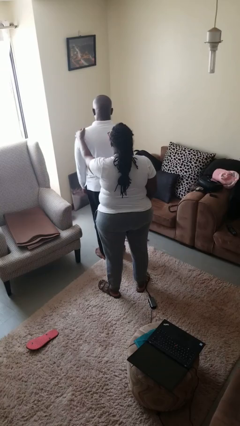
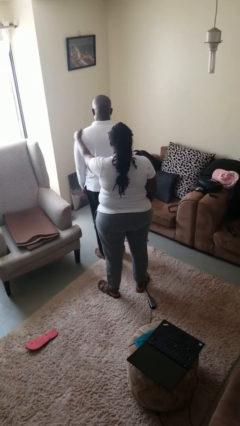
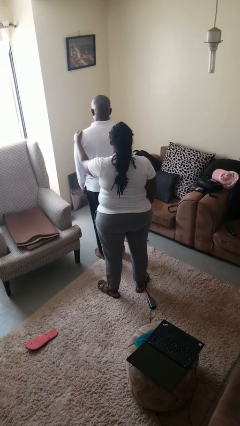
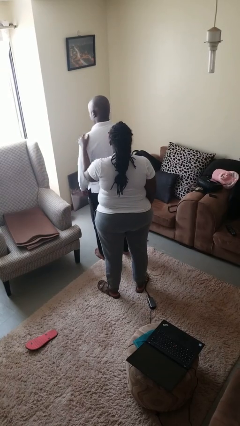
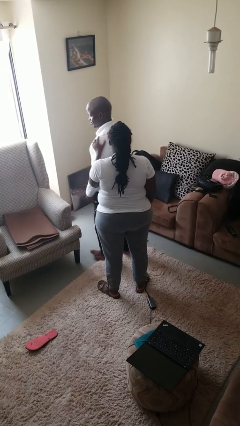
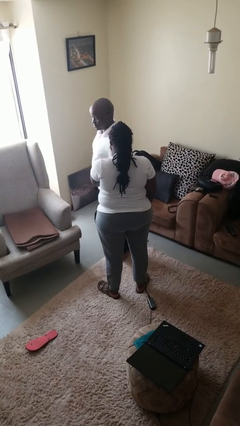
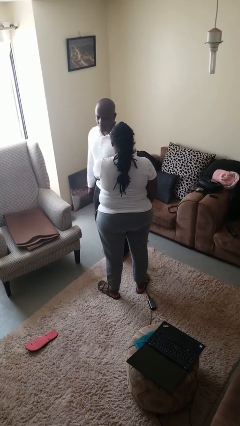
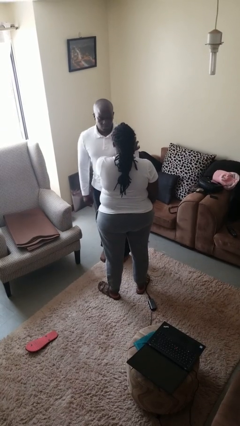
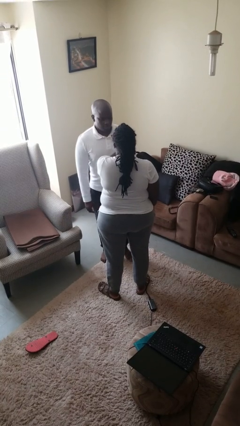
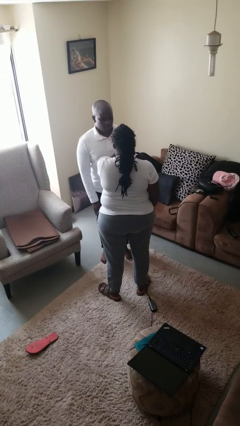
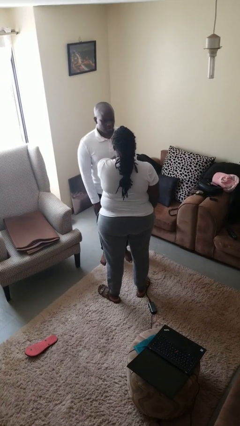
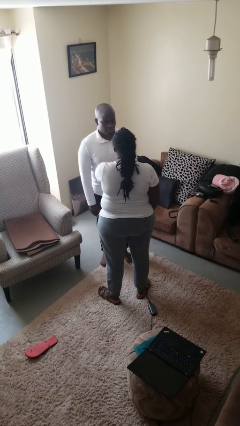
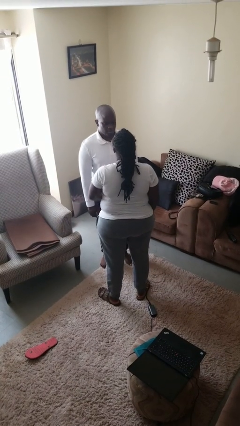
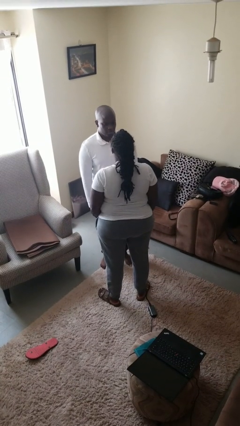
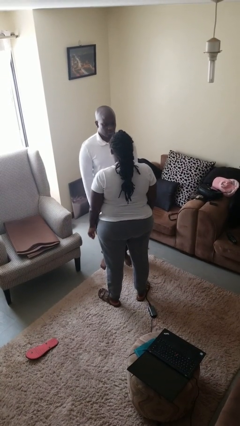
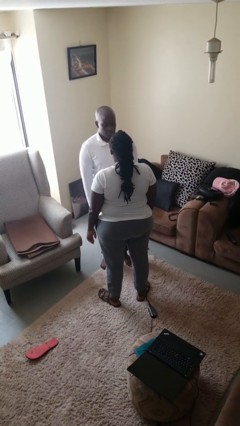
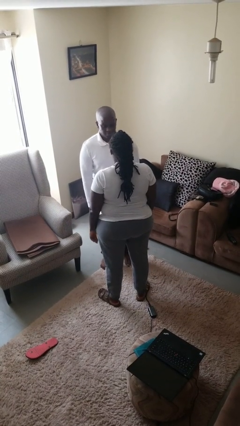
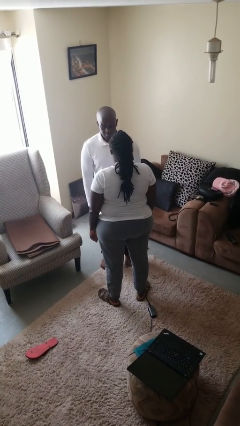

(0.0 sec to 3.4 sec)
person spins person around

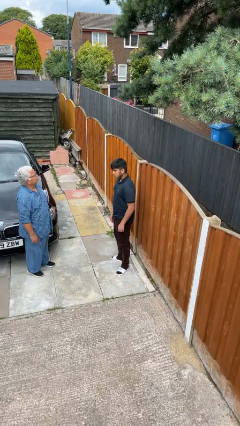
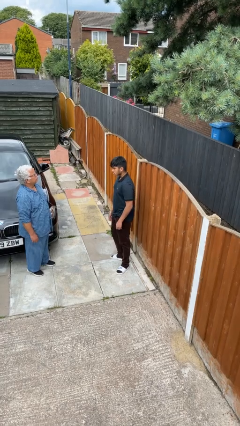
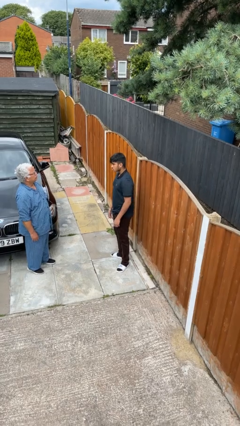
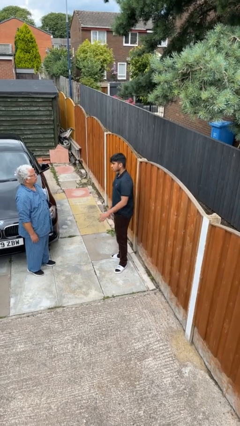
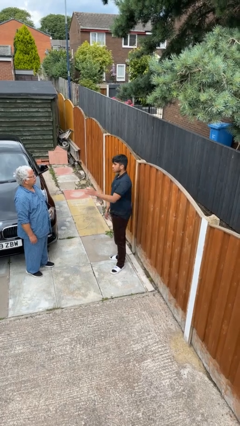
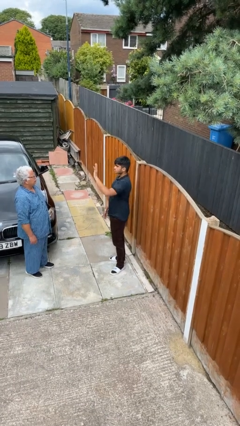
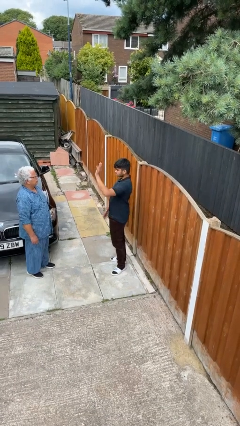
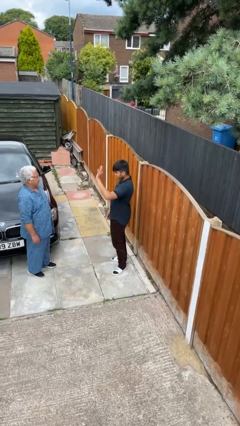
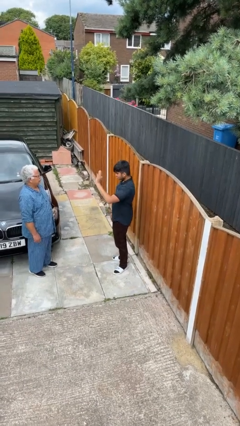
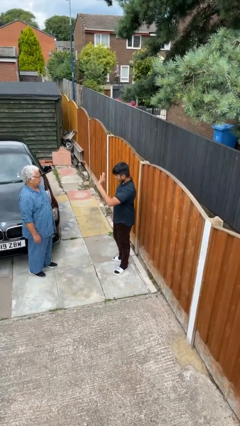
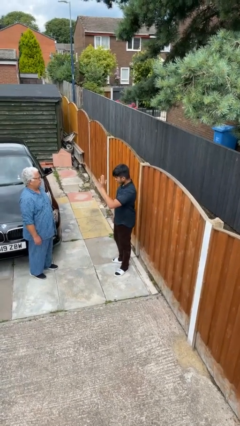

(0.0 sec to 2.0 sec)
person waves at person

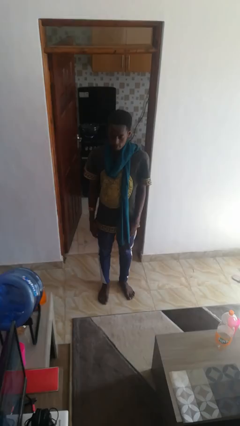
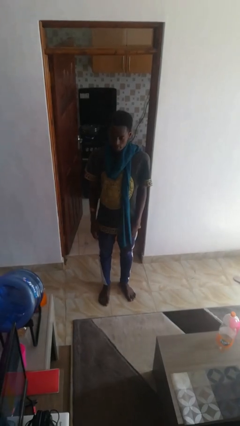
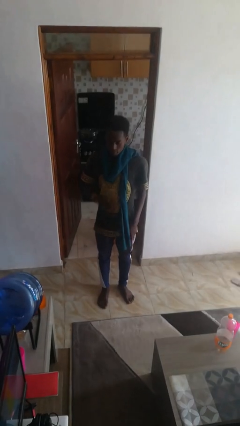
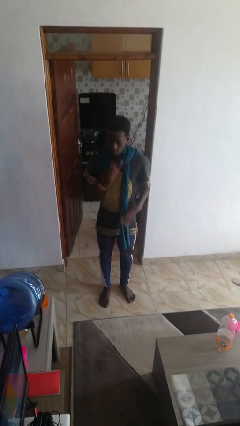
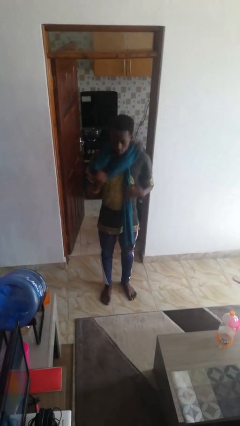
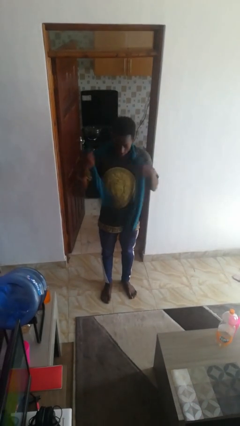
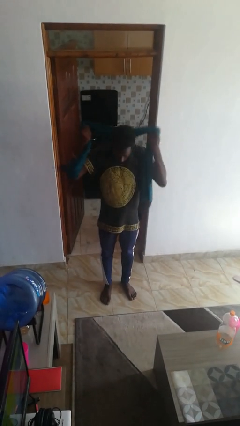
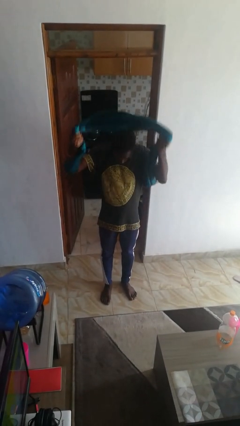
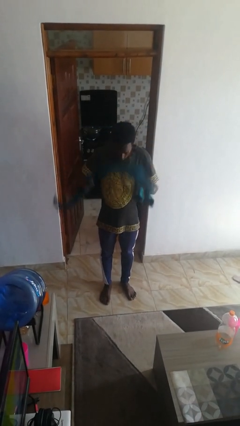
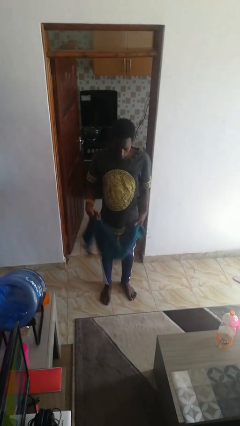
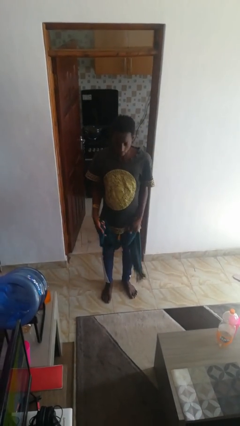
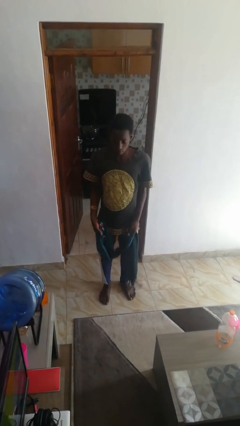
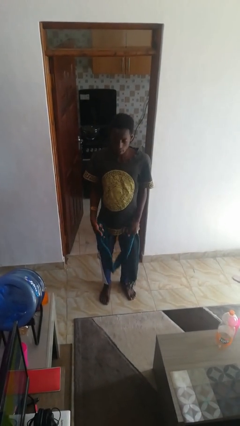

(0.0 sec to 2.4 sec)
person takes off scarf

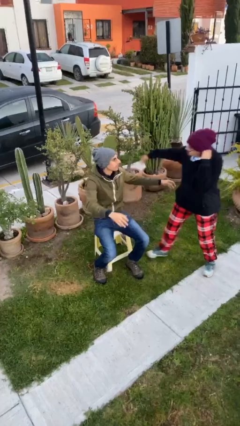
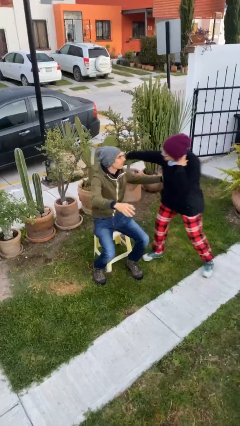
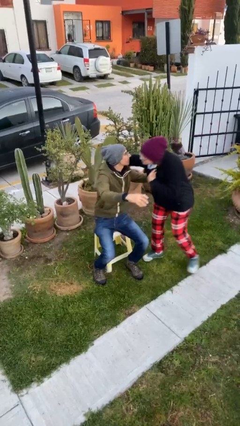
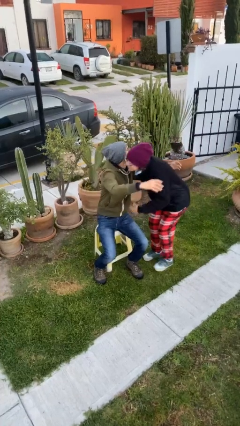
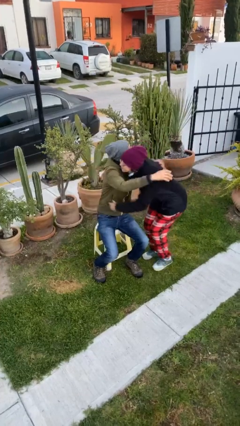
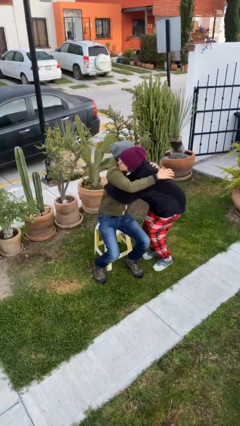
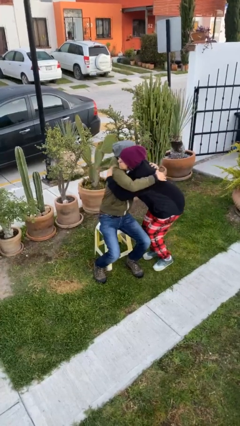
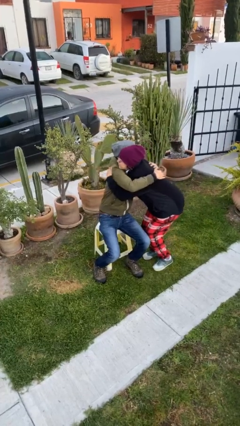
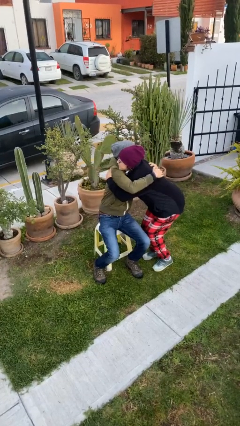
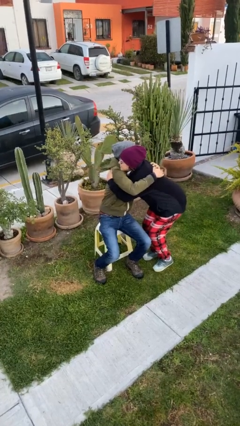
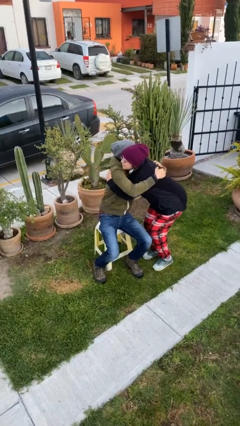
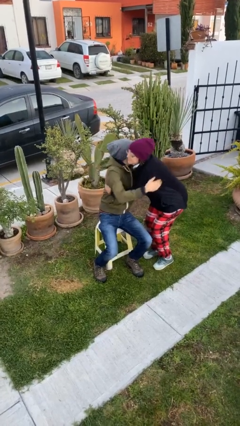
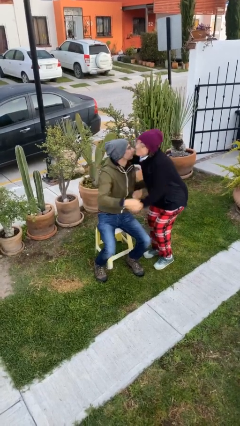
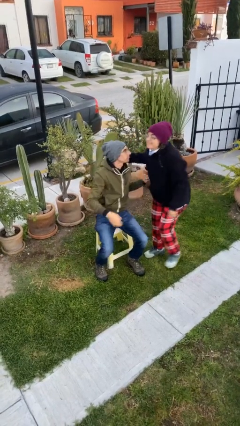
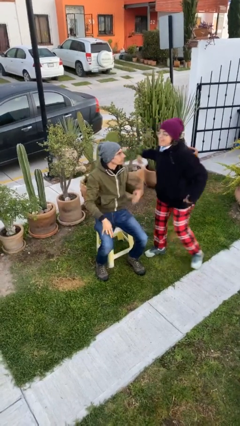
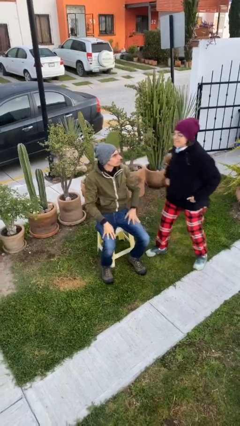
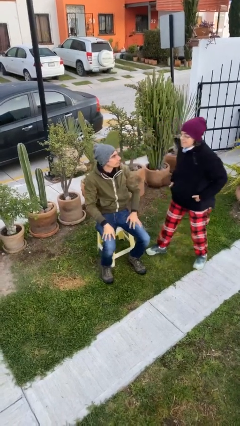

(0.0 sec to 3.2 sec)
person embraces person

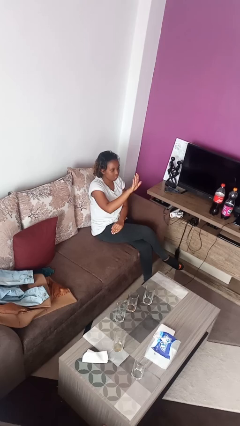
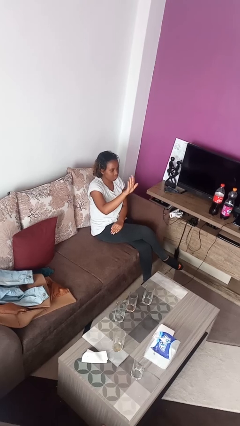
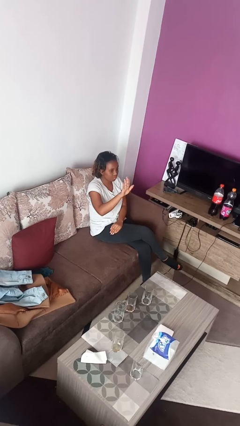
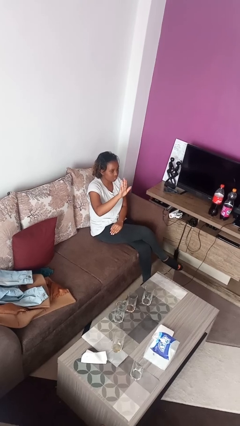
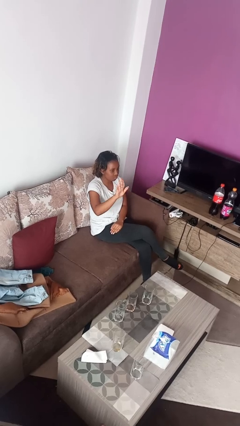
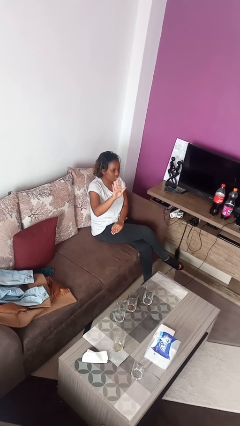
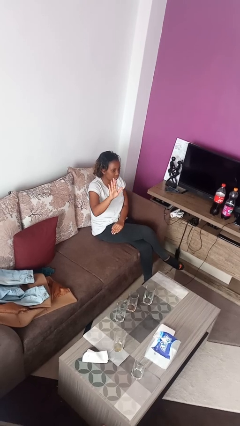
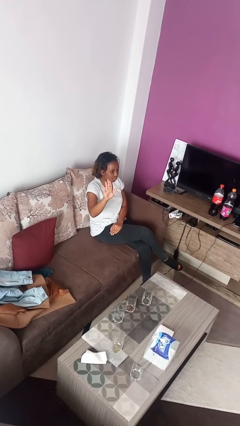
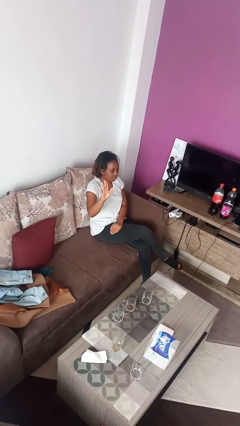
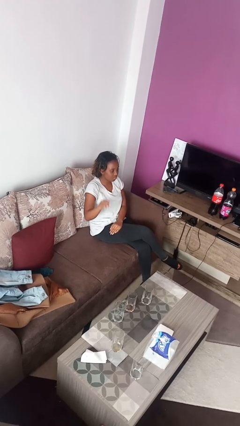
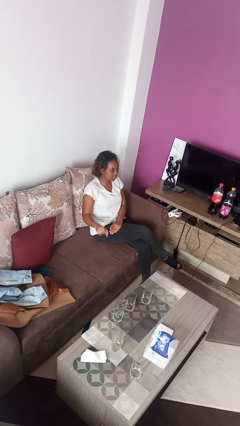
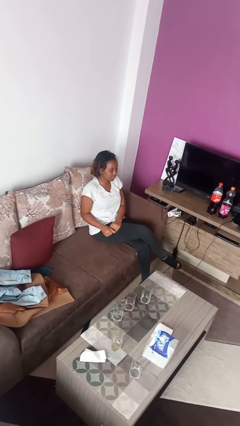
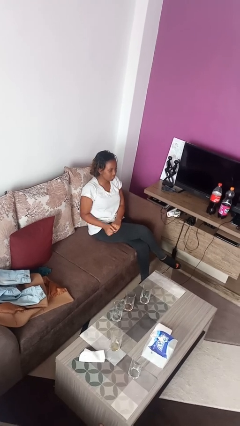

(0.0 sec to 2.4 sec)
person gestures swipe right

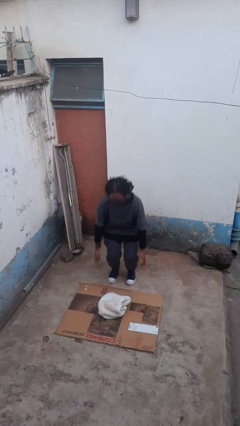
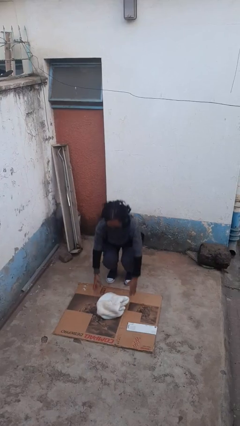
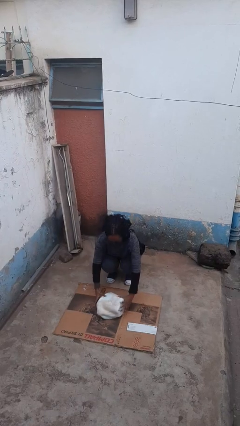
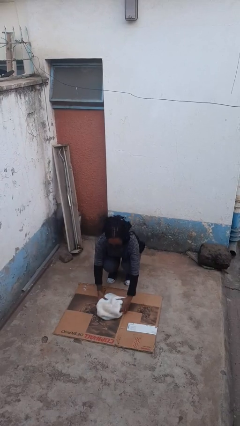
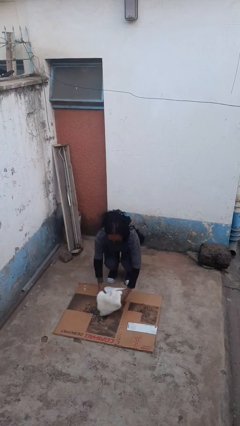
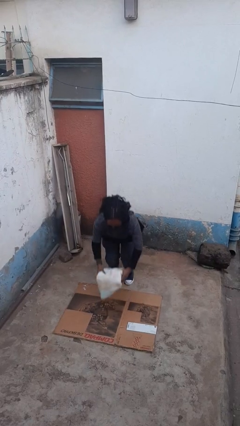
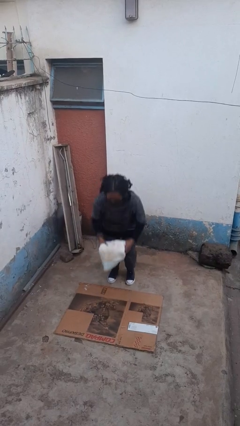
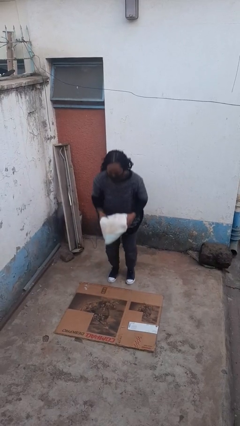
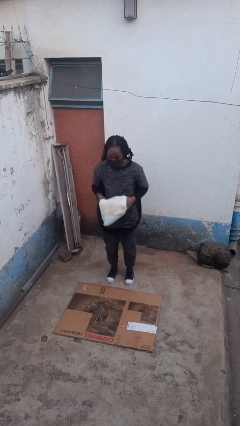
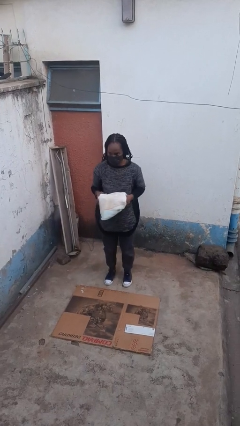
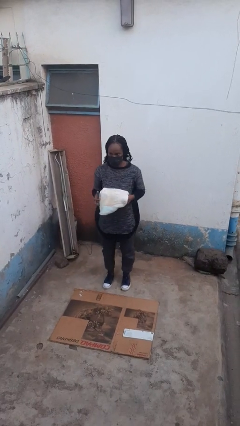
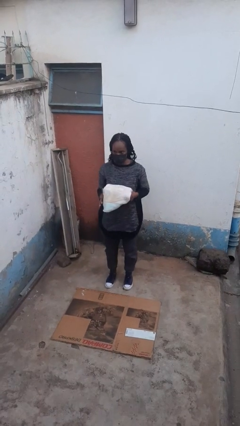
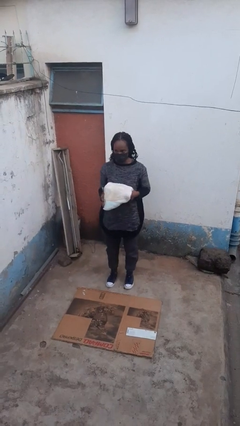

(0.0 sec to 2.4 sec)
person picks up object from floor

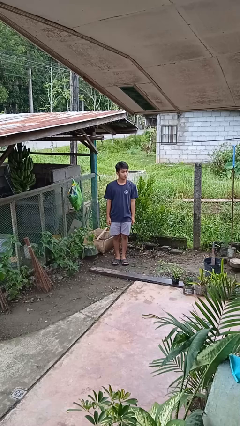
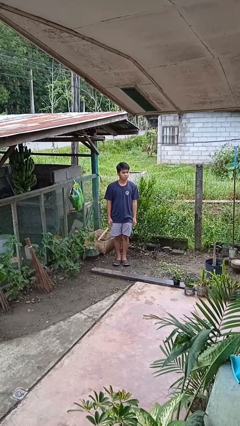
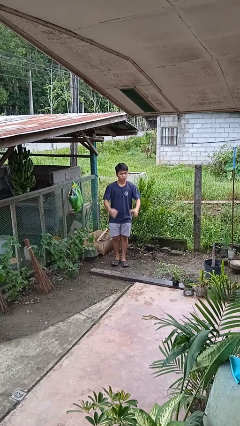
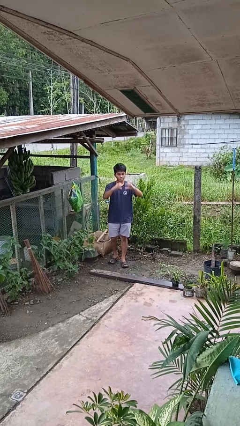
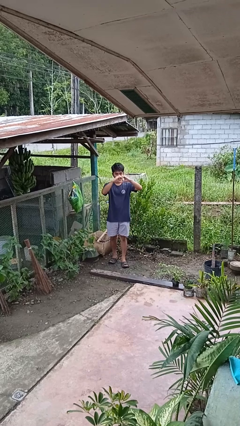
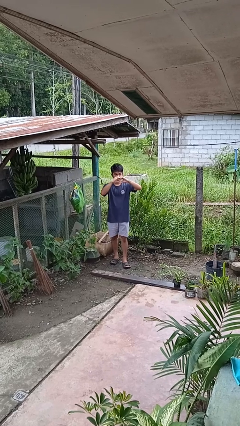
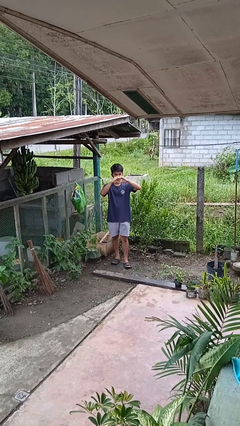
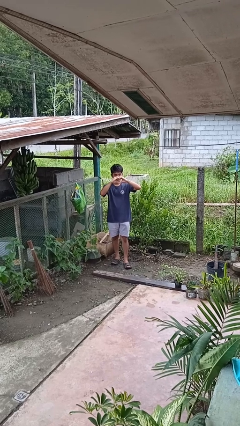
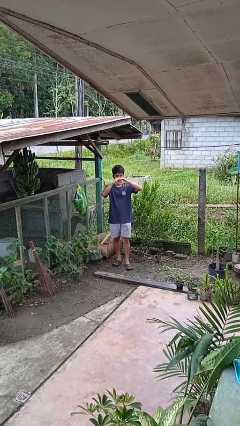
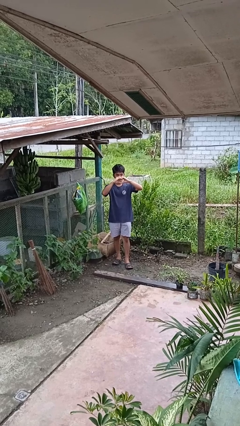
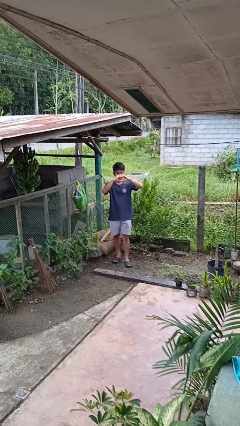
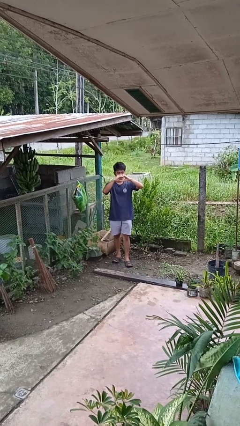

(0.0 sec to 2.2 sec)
person gestures heart
